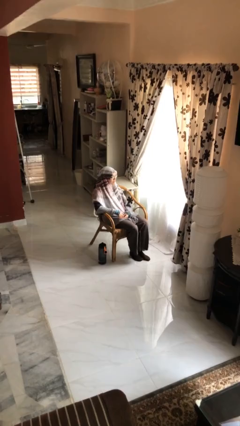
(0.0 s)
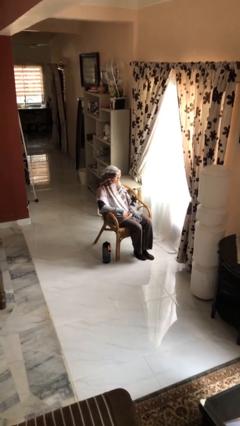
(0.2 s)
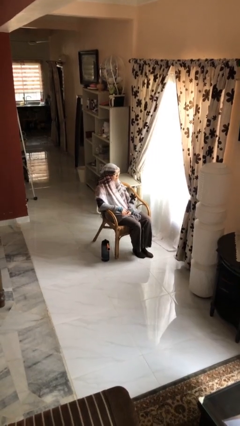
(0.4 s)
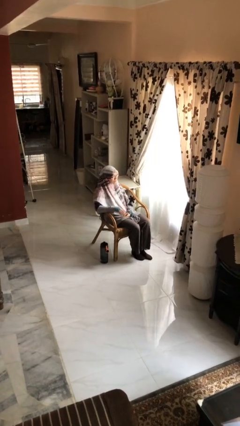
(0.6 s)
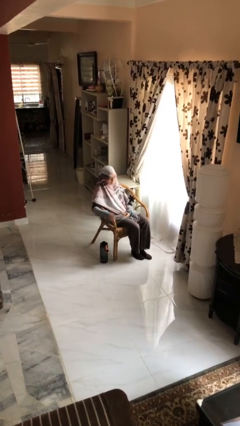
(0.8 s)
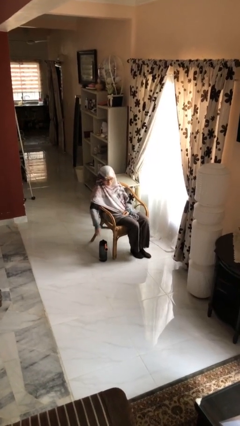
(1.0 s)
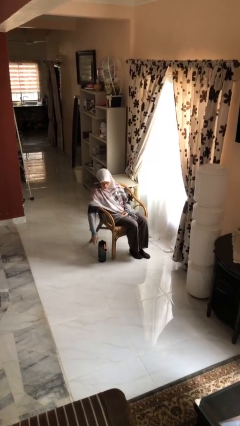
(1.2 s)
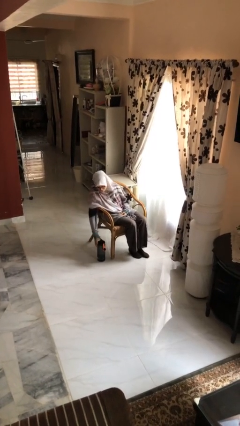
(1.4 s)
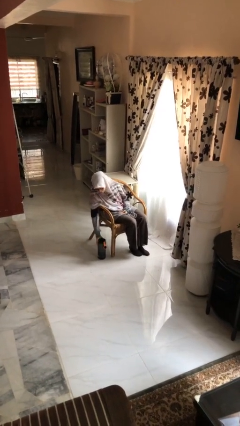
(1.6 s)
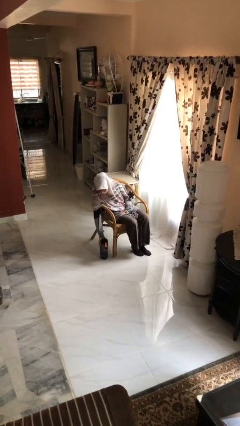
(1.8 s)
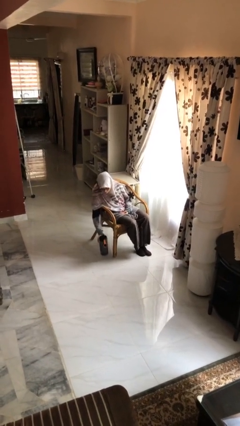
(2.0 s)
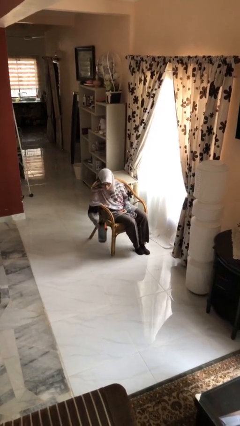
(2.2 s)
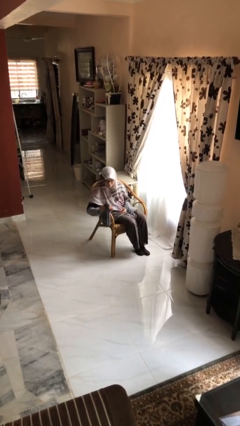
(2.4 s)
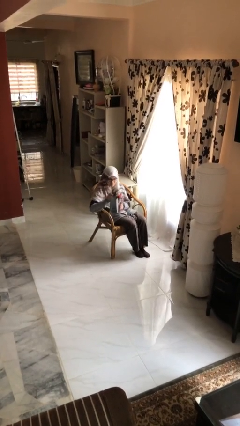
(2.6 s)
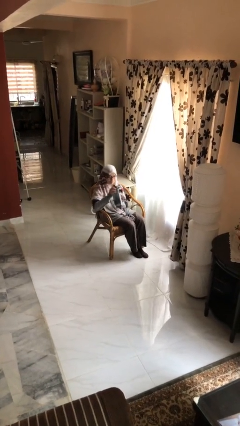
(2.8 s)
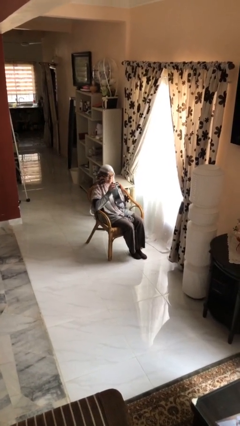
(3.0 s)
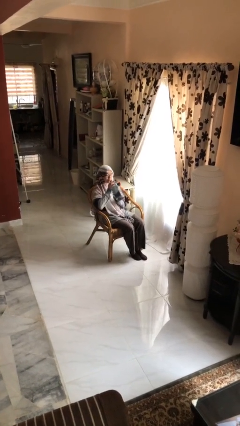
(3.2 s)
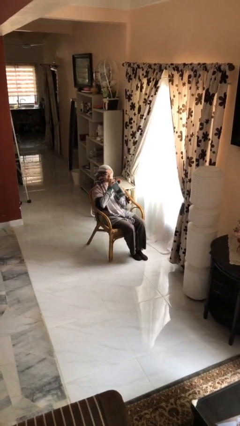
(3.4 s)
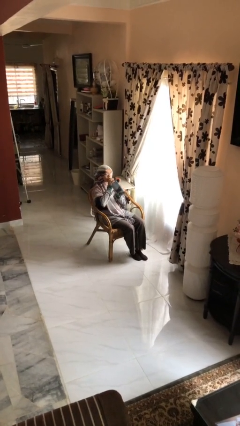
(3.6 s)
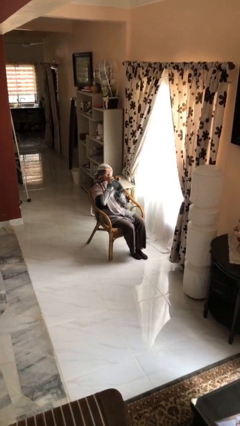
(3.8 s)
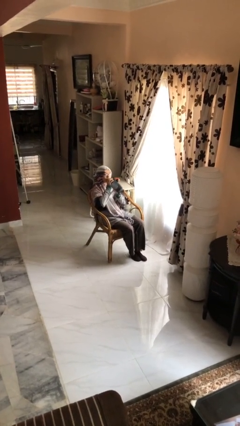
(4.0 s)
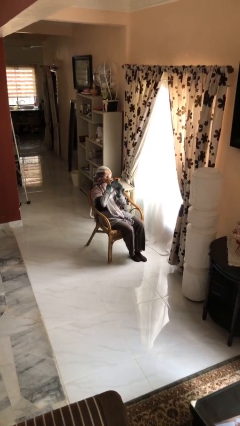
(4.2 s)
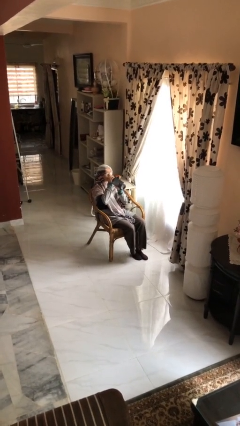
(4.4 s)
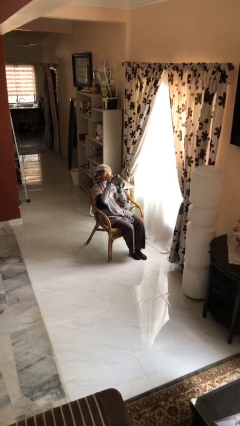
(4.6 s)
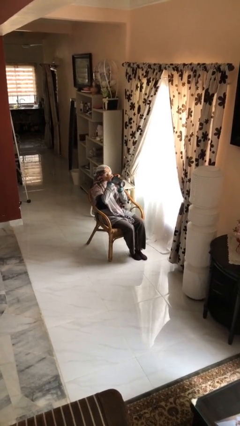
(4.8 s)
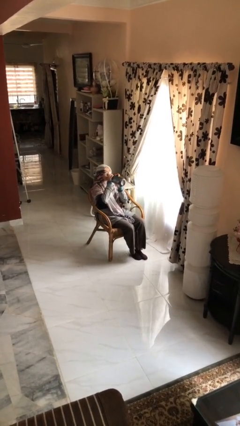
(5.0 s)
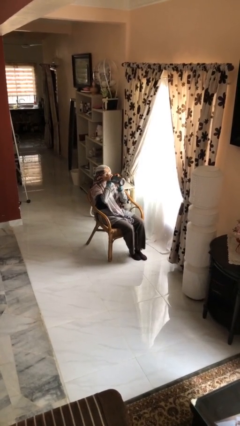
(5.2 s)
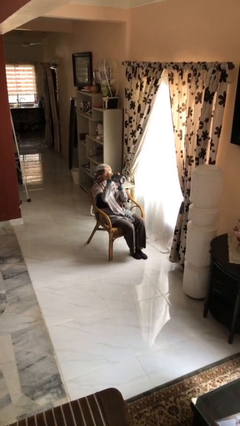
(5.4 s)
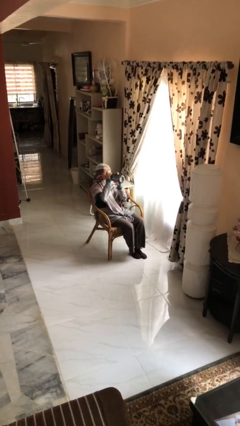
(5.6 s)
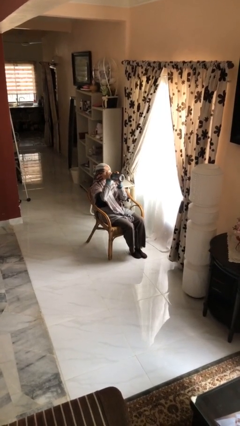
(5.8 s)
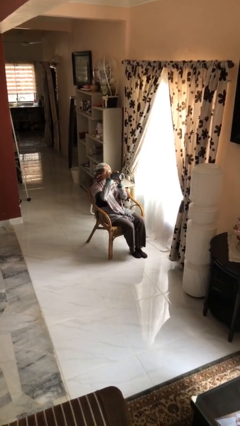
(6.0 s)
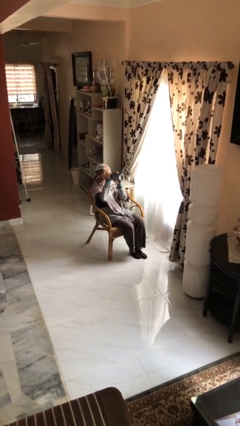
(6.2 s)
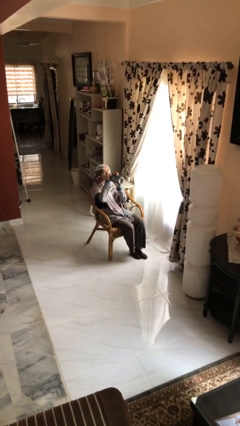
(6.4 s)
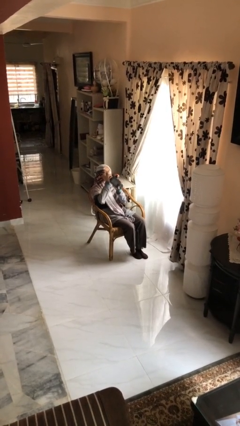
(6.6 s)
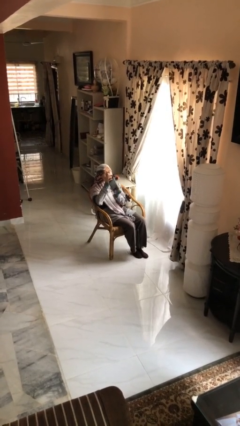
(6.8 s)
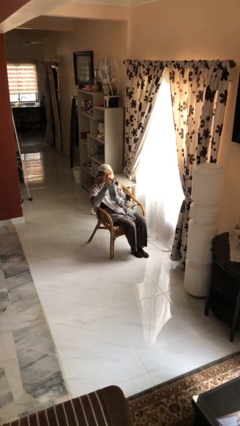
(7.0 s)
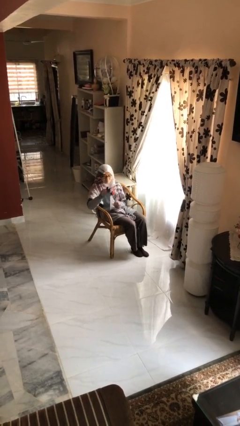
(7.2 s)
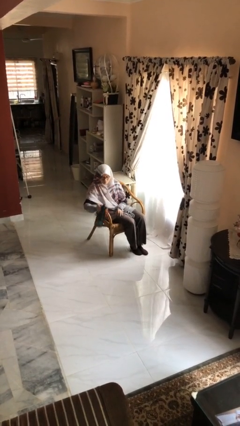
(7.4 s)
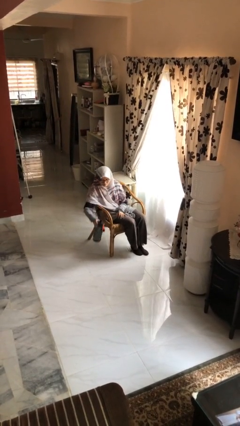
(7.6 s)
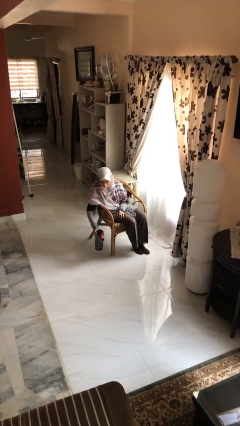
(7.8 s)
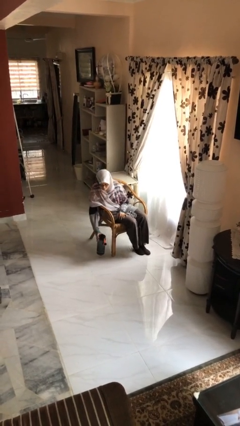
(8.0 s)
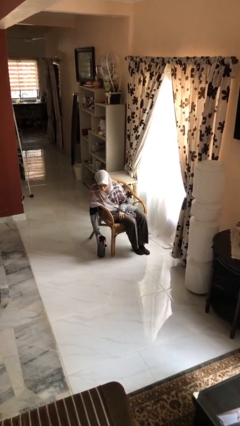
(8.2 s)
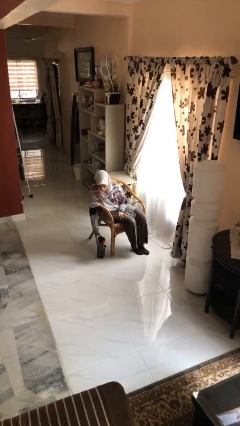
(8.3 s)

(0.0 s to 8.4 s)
person drinks from bottle

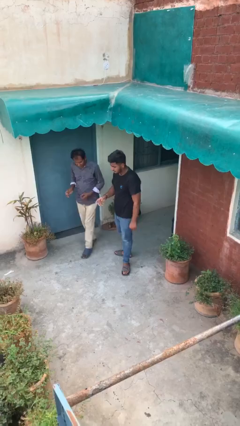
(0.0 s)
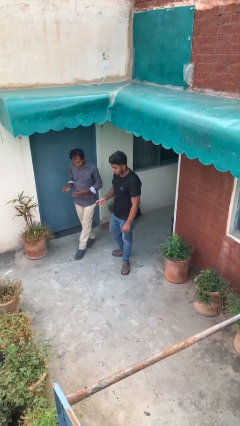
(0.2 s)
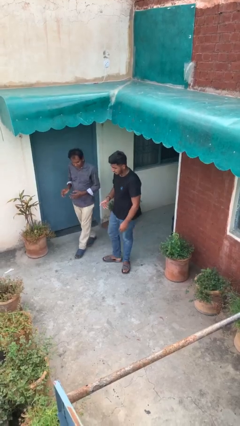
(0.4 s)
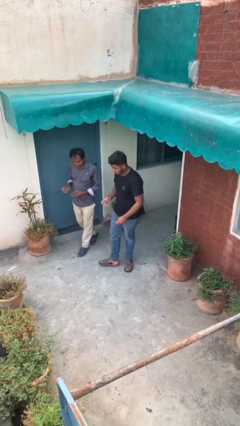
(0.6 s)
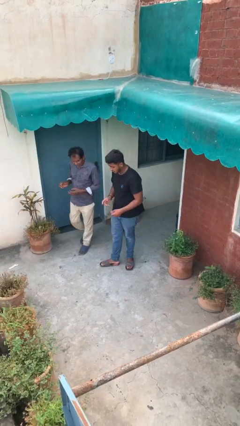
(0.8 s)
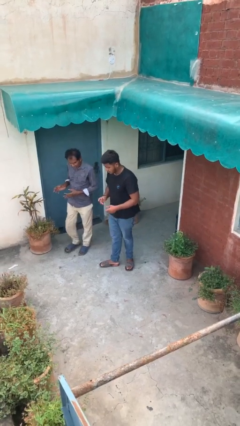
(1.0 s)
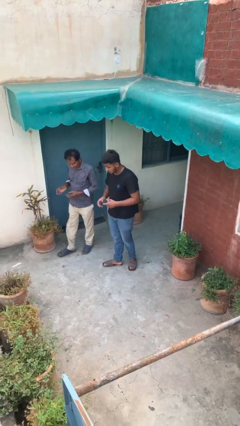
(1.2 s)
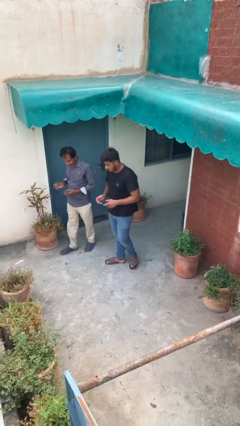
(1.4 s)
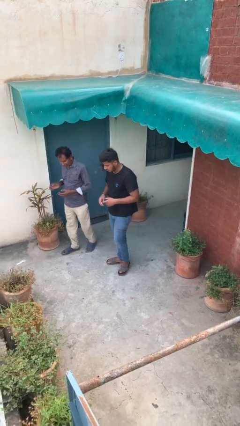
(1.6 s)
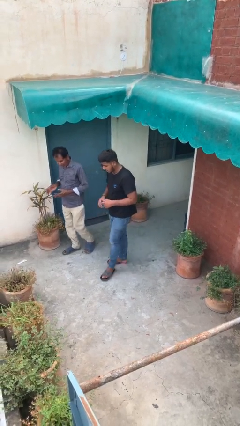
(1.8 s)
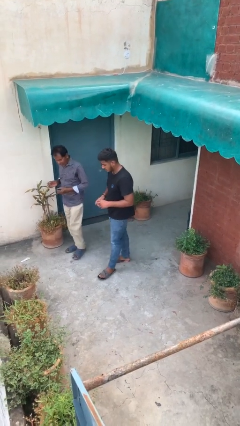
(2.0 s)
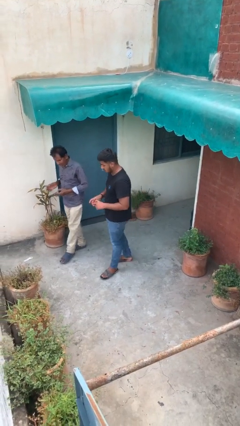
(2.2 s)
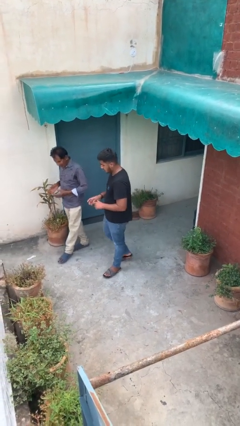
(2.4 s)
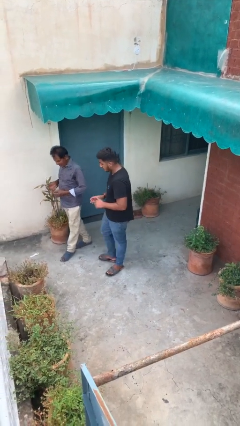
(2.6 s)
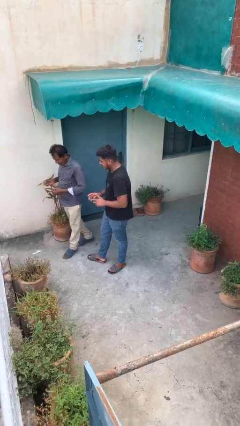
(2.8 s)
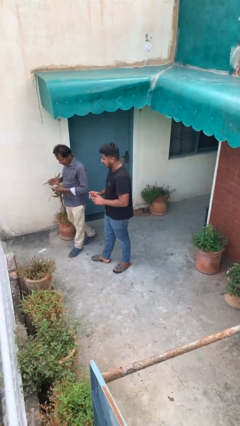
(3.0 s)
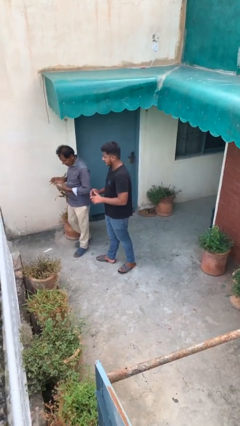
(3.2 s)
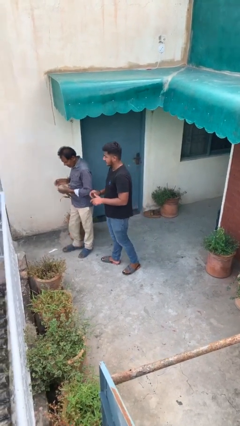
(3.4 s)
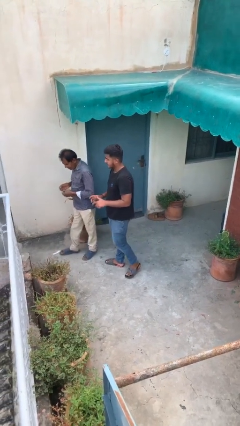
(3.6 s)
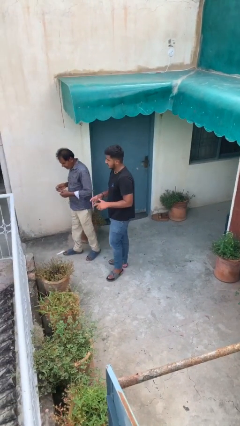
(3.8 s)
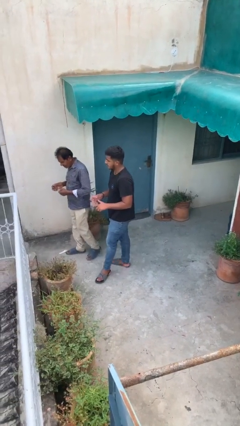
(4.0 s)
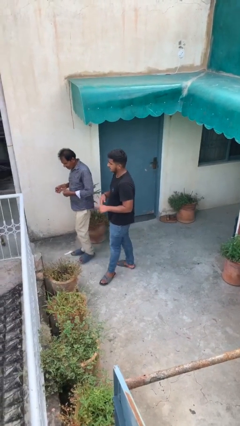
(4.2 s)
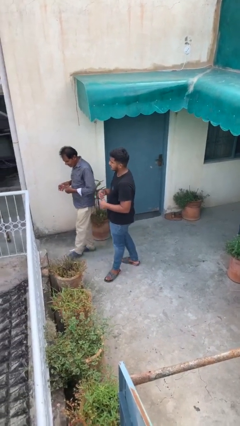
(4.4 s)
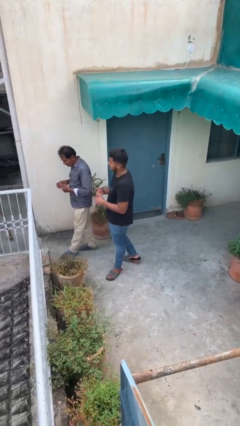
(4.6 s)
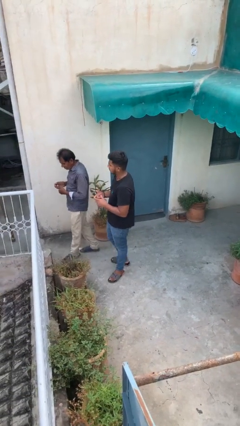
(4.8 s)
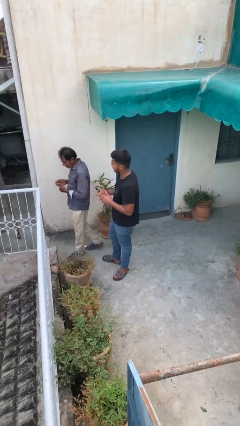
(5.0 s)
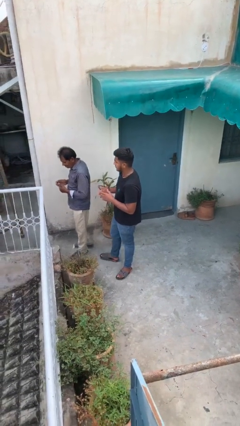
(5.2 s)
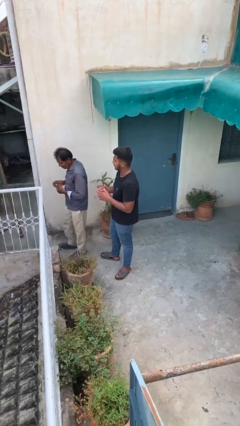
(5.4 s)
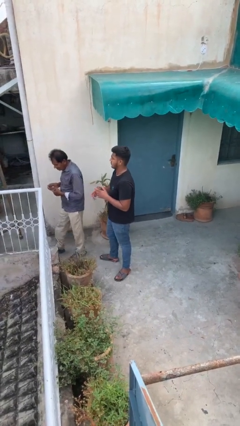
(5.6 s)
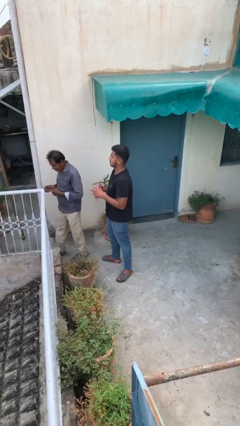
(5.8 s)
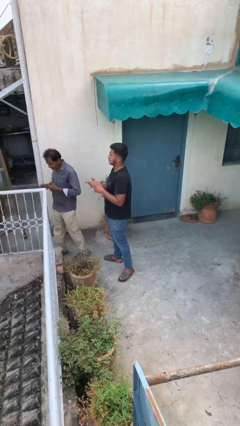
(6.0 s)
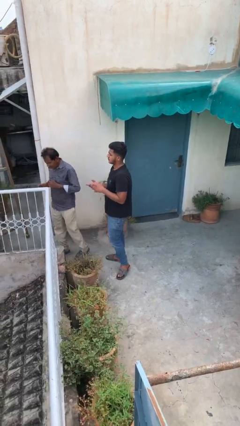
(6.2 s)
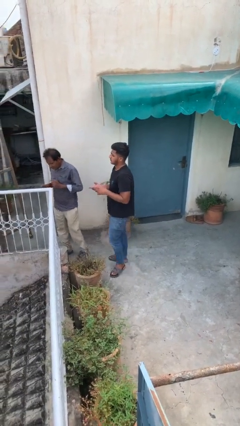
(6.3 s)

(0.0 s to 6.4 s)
person talks to person

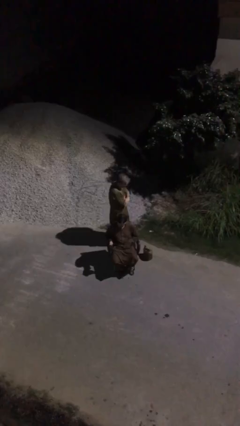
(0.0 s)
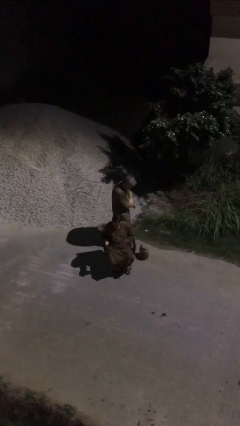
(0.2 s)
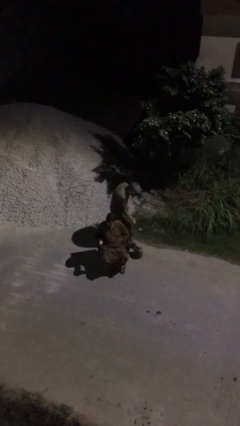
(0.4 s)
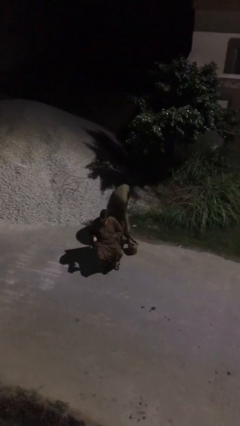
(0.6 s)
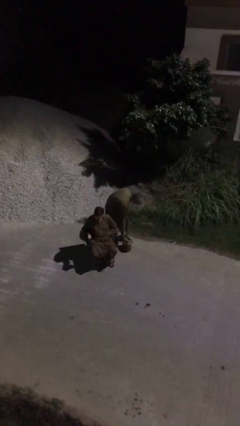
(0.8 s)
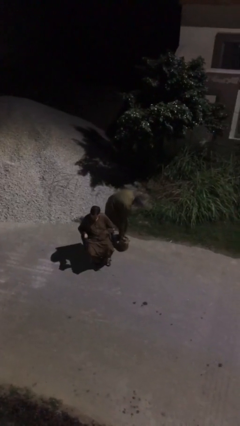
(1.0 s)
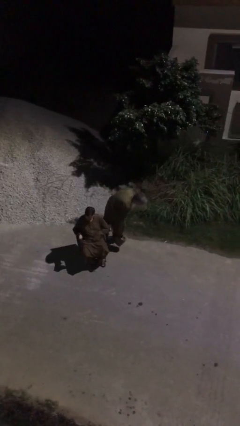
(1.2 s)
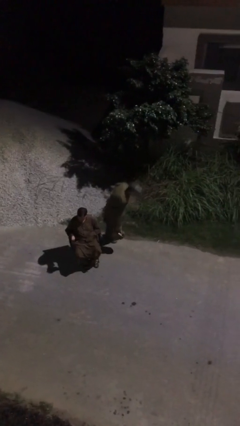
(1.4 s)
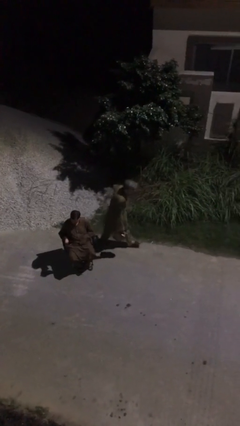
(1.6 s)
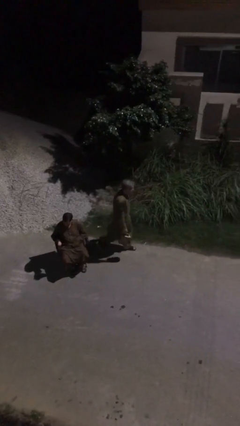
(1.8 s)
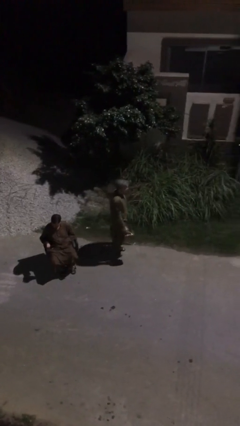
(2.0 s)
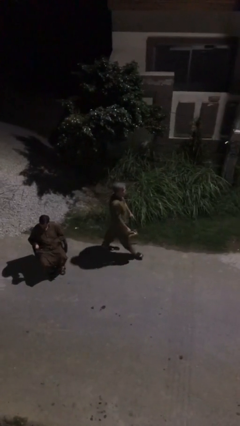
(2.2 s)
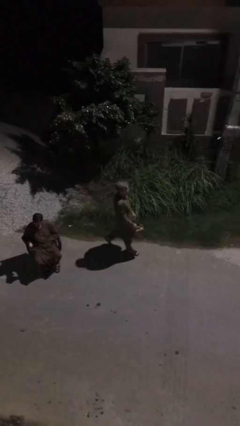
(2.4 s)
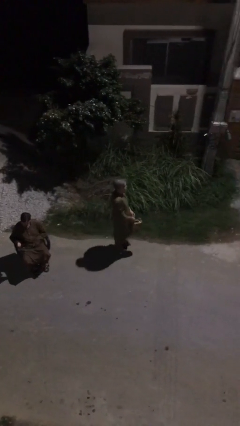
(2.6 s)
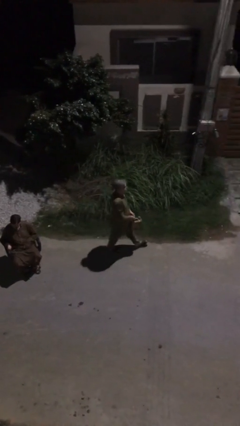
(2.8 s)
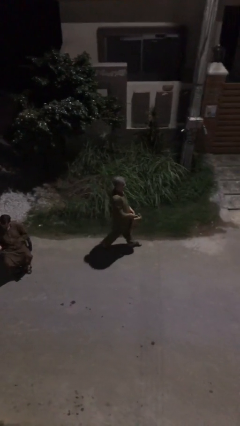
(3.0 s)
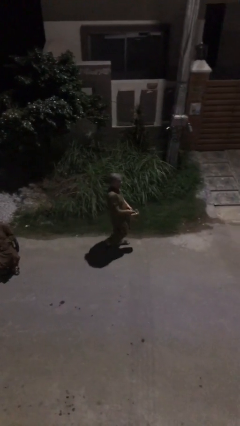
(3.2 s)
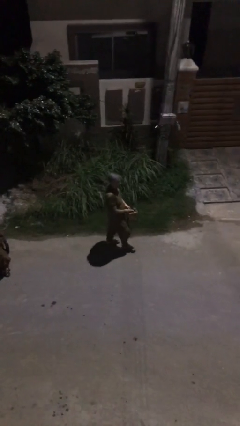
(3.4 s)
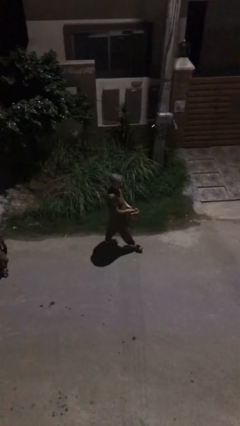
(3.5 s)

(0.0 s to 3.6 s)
person steals object from person
